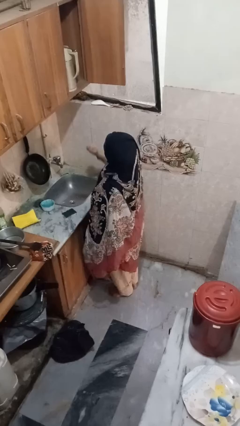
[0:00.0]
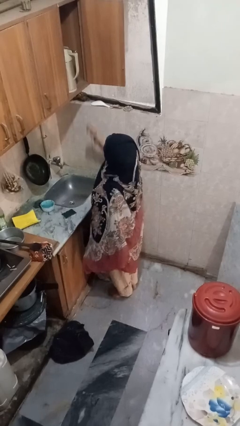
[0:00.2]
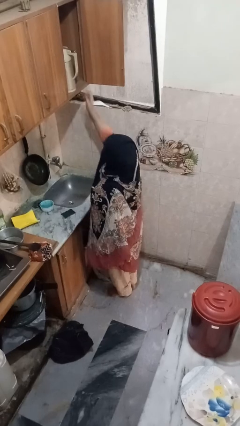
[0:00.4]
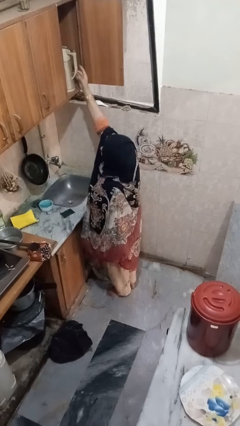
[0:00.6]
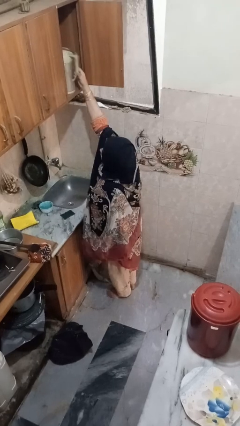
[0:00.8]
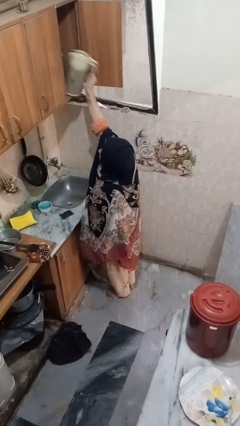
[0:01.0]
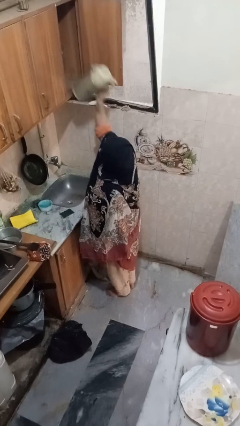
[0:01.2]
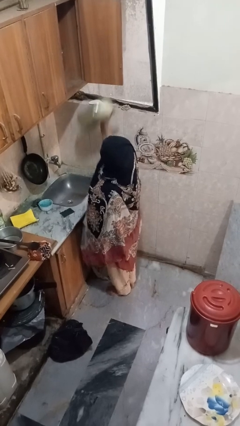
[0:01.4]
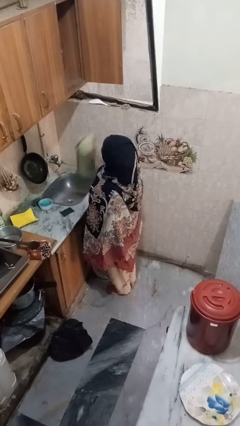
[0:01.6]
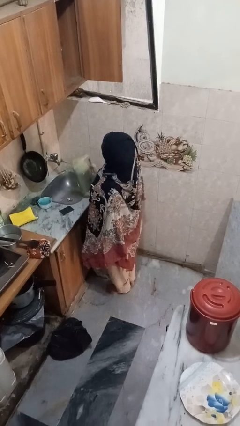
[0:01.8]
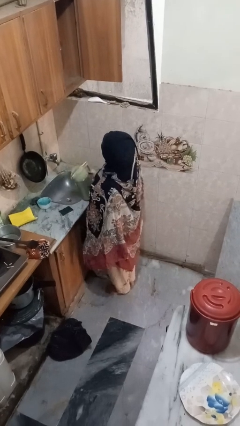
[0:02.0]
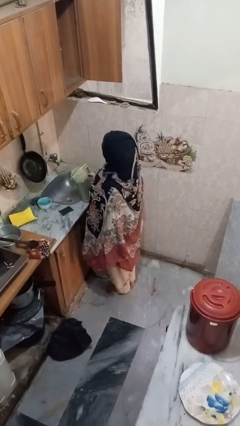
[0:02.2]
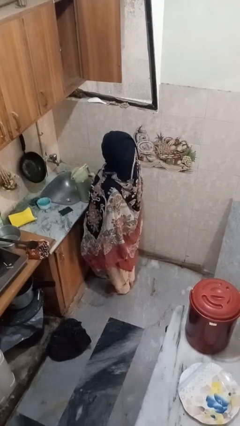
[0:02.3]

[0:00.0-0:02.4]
person puts object in cabinet

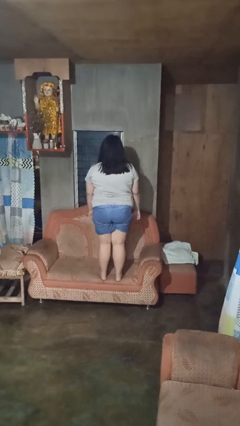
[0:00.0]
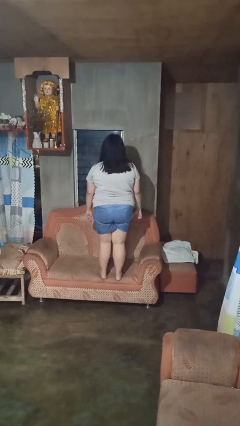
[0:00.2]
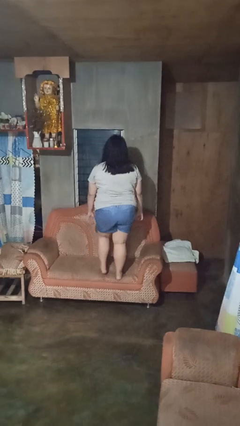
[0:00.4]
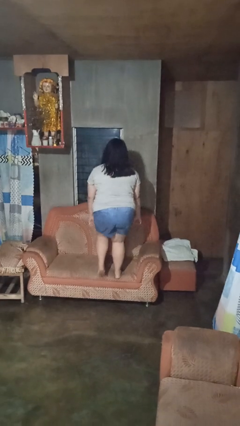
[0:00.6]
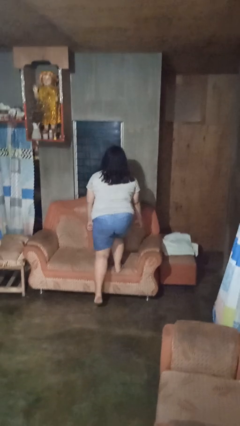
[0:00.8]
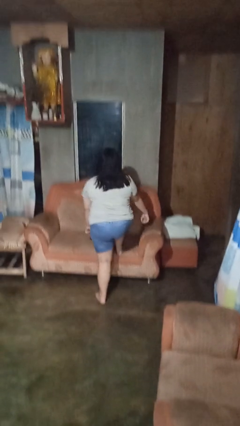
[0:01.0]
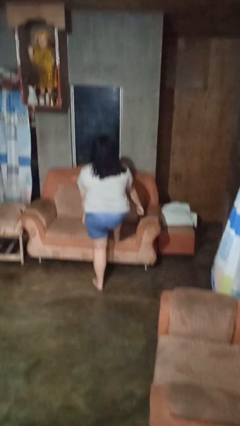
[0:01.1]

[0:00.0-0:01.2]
person climbs off couch

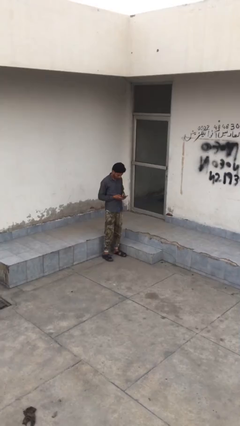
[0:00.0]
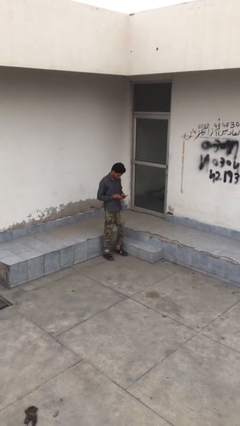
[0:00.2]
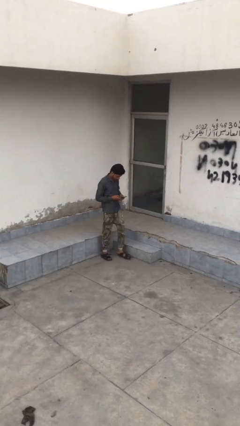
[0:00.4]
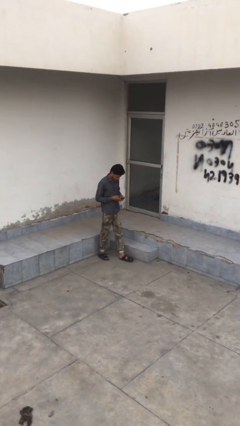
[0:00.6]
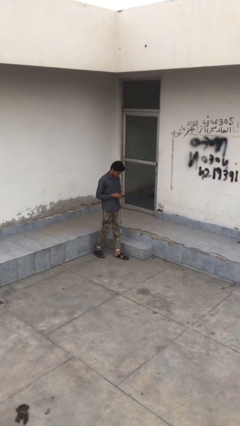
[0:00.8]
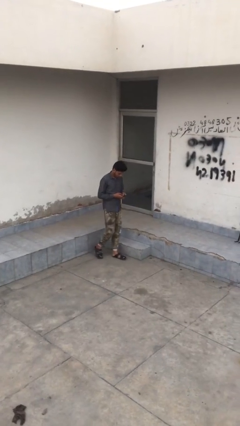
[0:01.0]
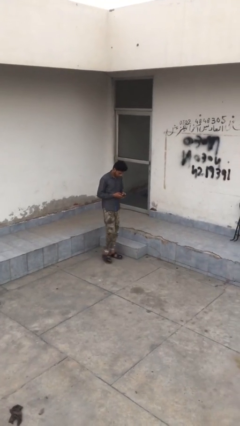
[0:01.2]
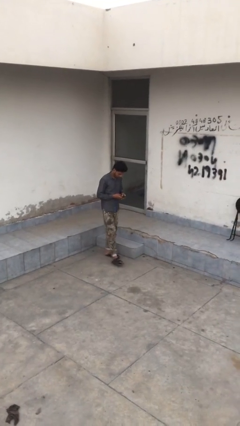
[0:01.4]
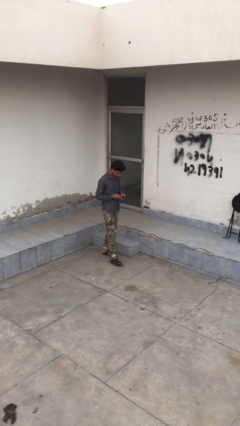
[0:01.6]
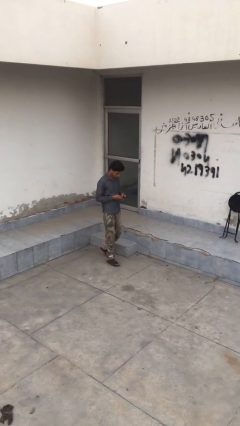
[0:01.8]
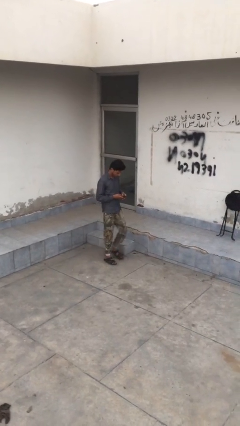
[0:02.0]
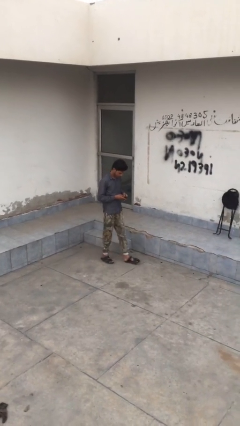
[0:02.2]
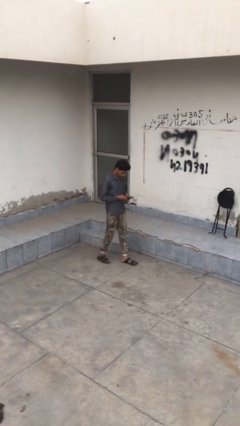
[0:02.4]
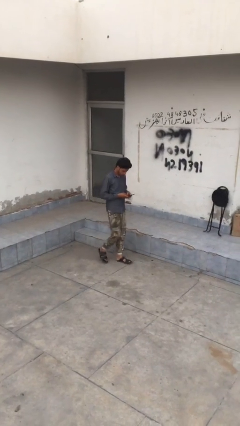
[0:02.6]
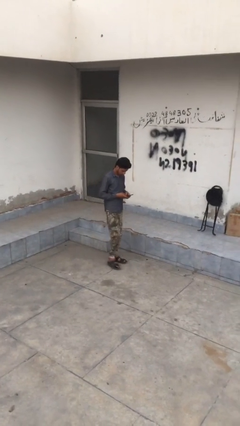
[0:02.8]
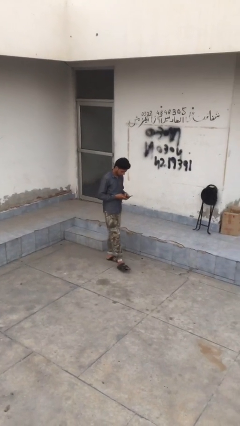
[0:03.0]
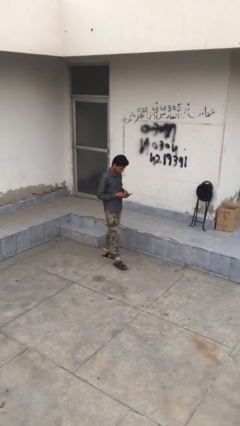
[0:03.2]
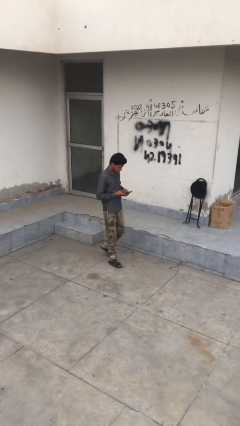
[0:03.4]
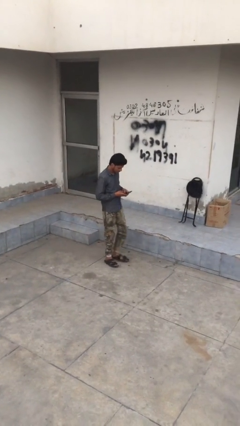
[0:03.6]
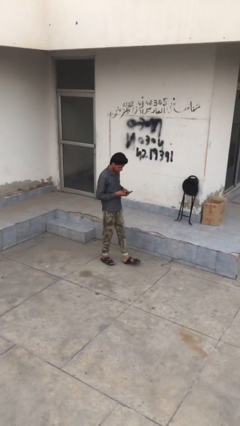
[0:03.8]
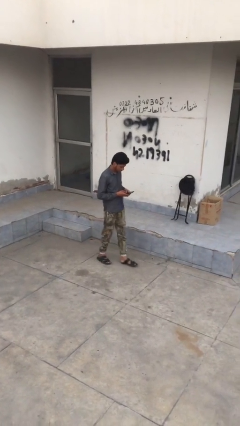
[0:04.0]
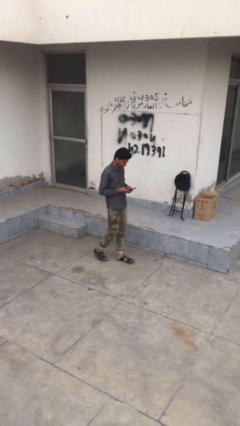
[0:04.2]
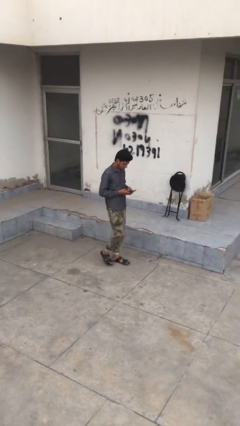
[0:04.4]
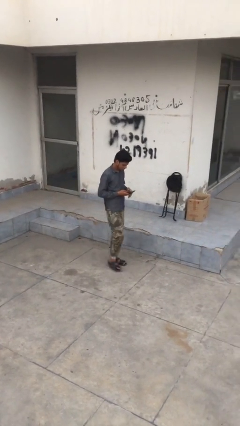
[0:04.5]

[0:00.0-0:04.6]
person texts on phone

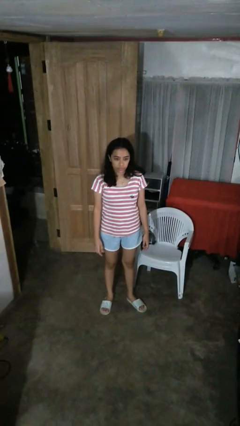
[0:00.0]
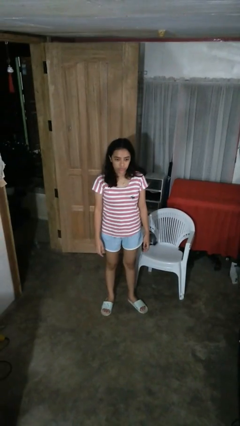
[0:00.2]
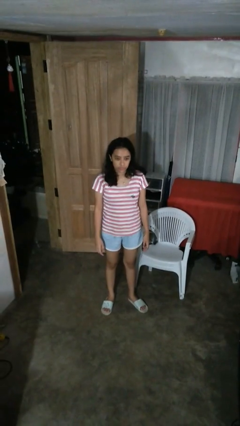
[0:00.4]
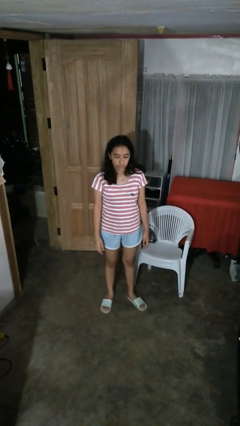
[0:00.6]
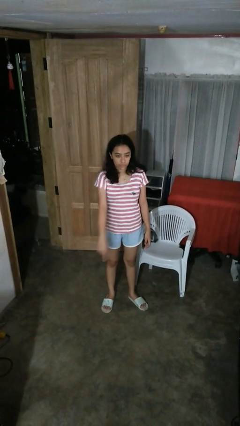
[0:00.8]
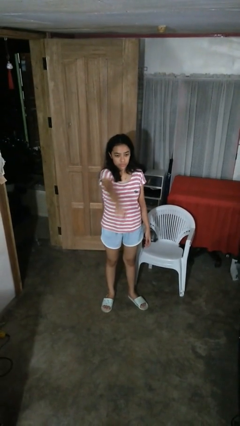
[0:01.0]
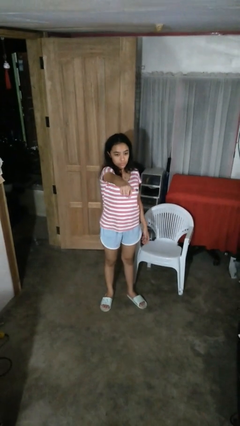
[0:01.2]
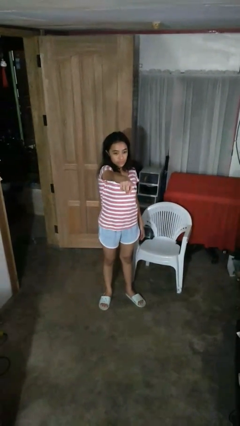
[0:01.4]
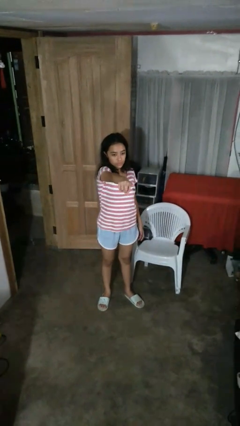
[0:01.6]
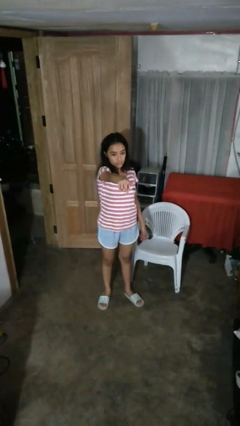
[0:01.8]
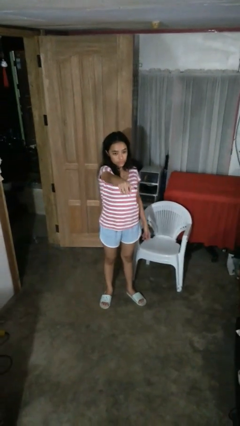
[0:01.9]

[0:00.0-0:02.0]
person points at person

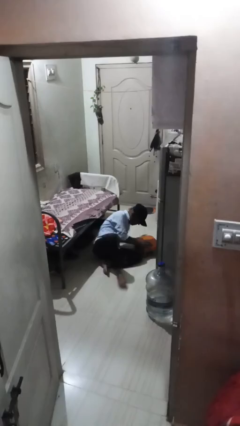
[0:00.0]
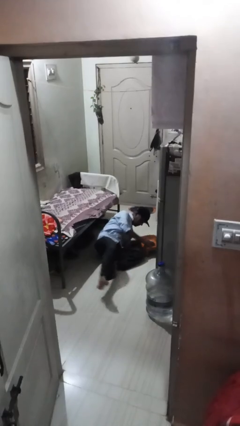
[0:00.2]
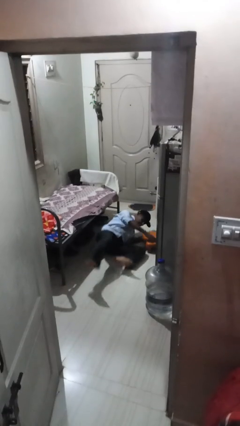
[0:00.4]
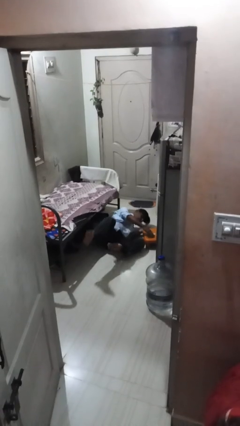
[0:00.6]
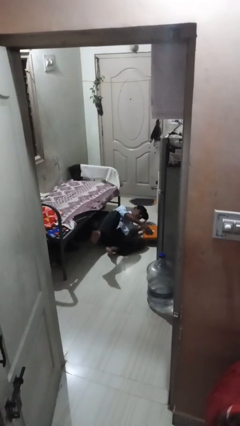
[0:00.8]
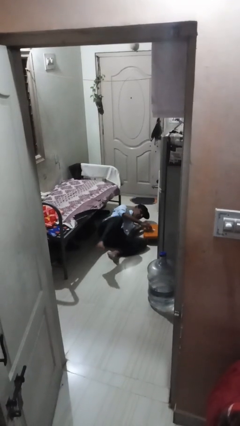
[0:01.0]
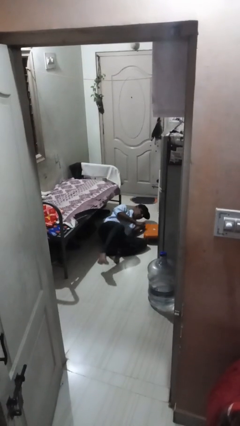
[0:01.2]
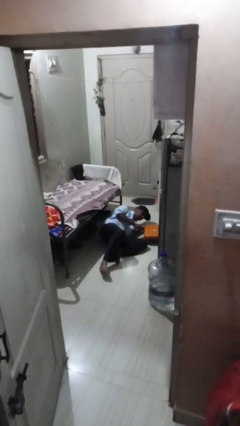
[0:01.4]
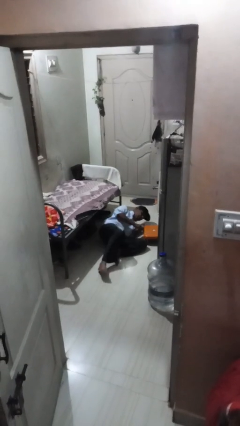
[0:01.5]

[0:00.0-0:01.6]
person lies down on floor

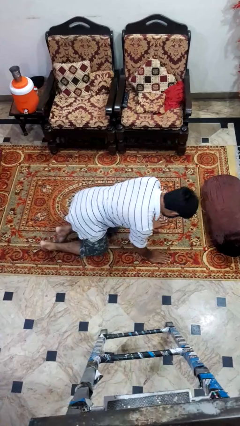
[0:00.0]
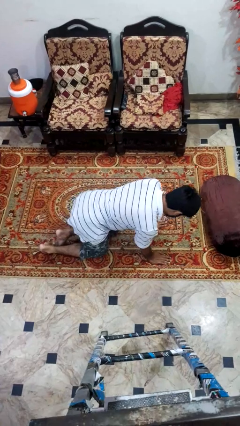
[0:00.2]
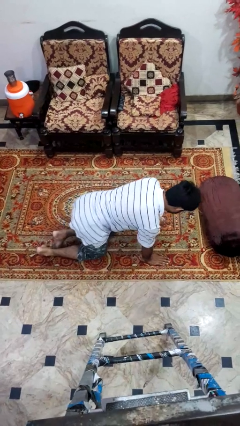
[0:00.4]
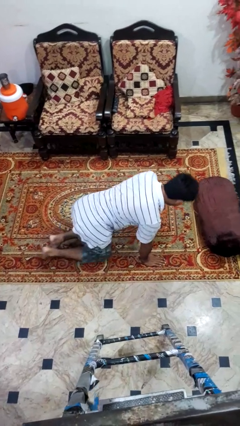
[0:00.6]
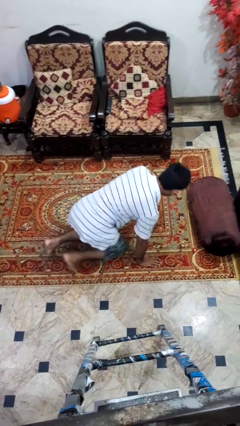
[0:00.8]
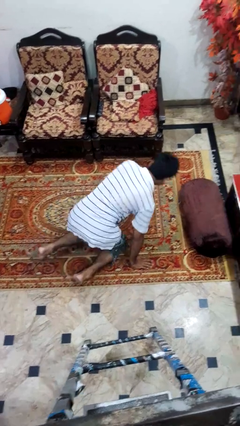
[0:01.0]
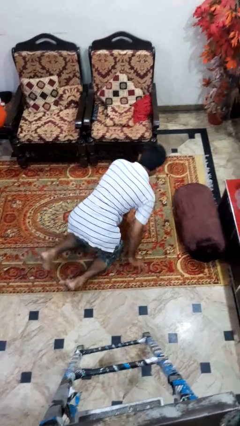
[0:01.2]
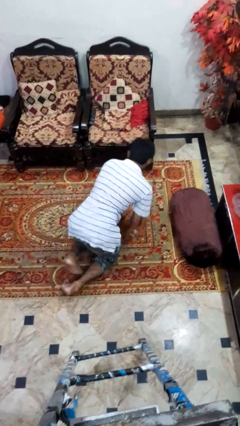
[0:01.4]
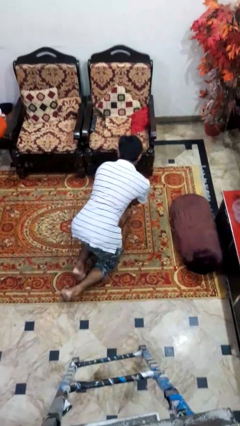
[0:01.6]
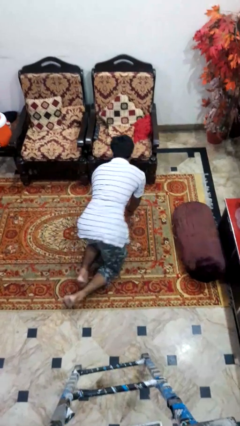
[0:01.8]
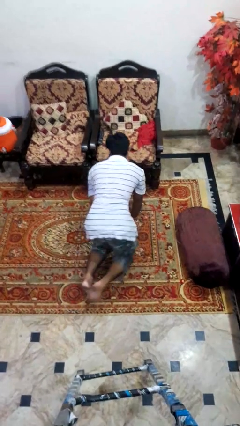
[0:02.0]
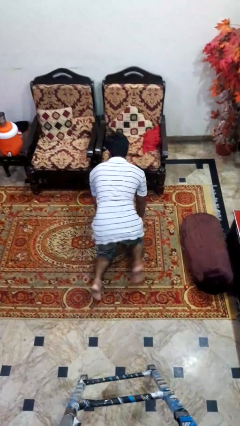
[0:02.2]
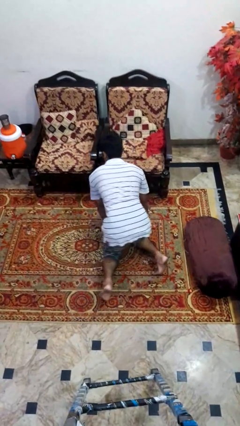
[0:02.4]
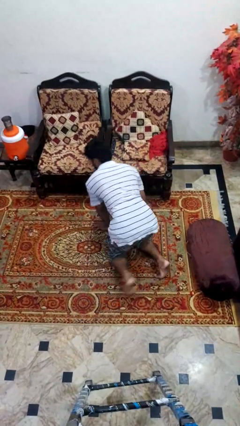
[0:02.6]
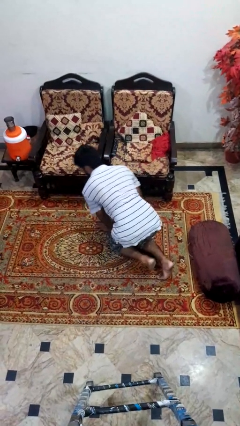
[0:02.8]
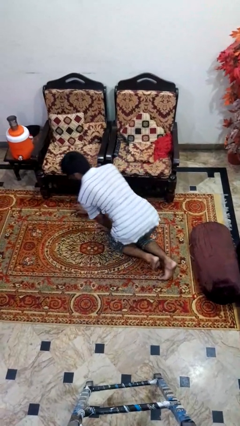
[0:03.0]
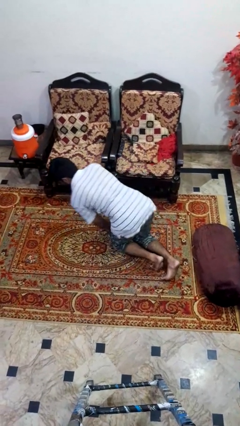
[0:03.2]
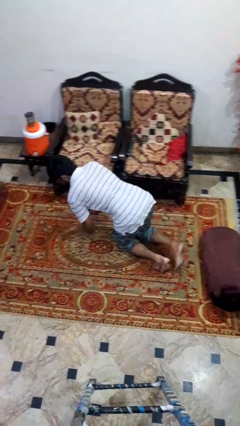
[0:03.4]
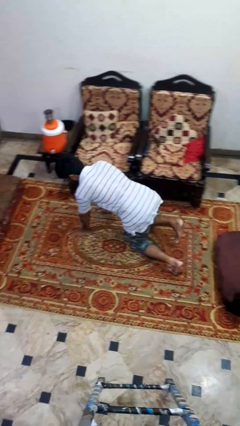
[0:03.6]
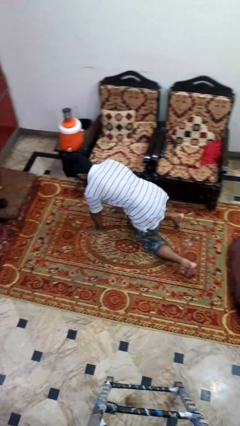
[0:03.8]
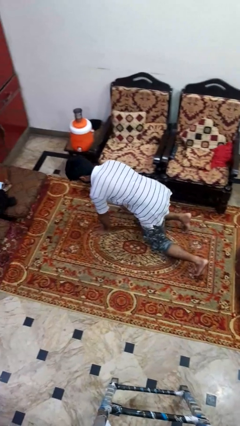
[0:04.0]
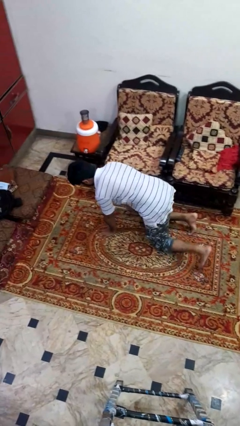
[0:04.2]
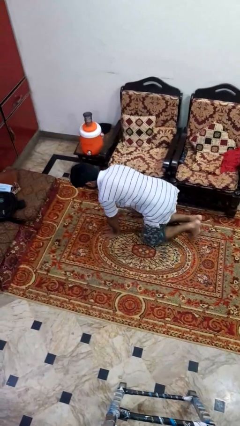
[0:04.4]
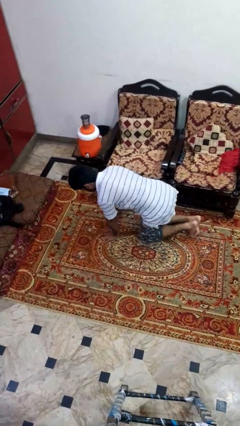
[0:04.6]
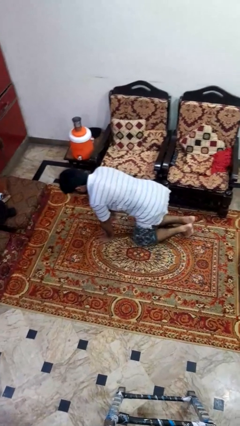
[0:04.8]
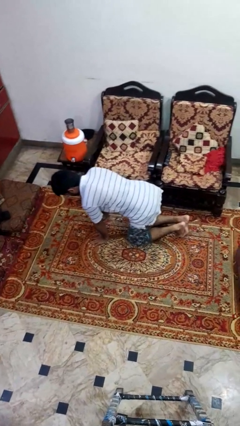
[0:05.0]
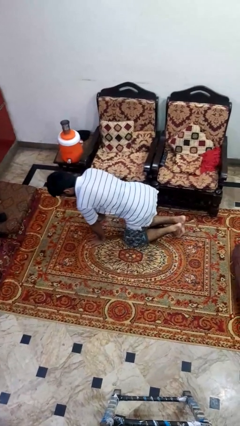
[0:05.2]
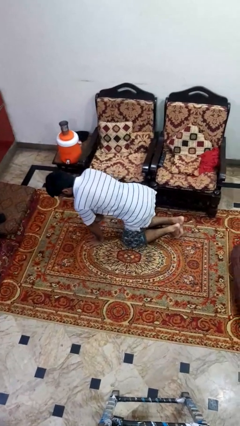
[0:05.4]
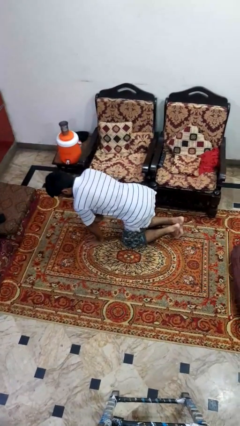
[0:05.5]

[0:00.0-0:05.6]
person crawls

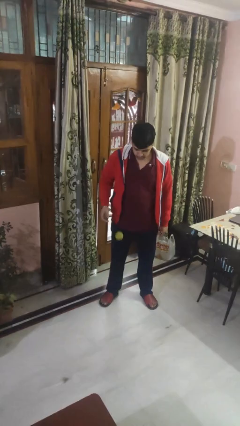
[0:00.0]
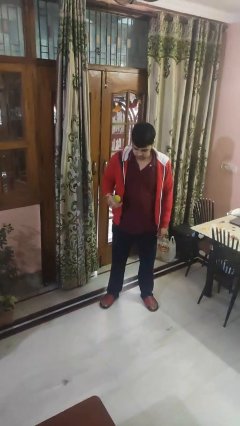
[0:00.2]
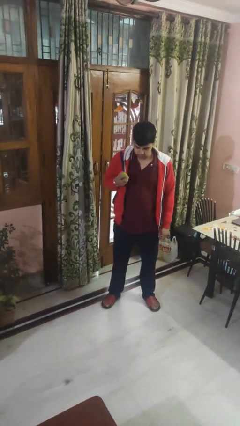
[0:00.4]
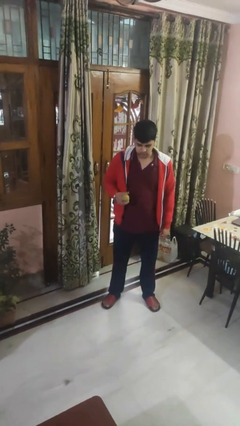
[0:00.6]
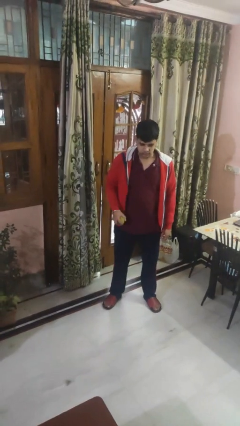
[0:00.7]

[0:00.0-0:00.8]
person bounces ball on floor
